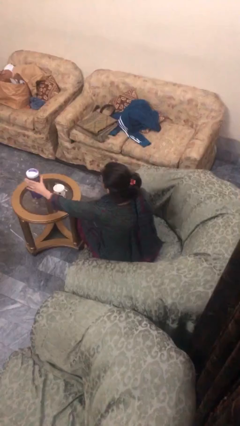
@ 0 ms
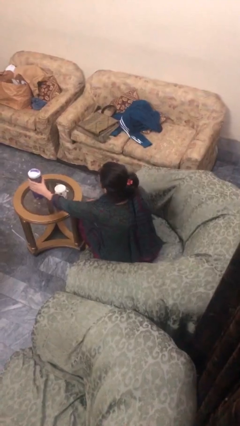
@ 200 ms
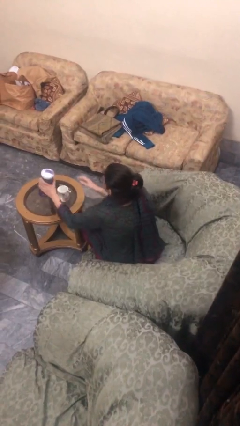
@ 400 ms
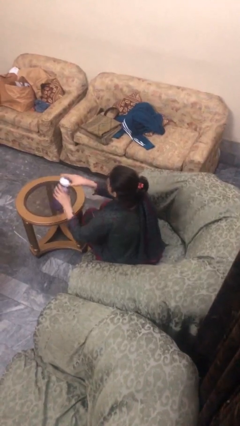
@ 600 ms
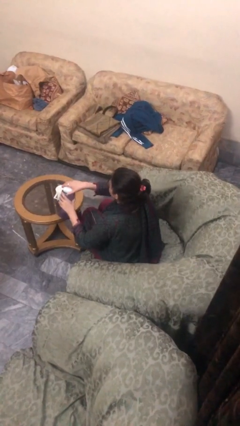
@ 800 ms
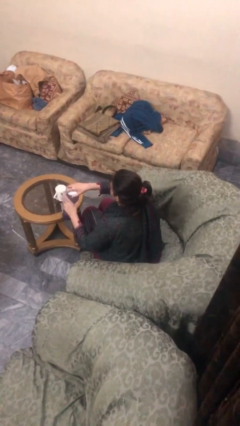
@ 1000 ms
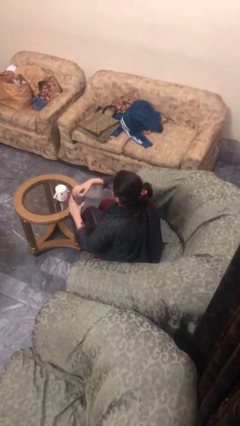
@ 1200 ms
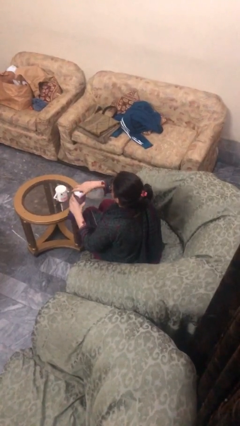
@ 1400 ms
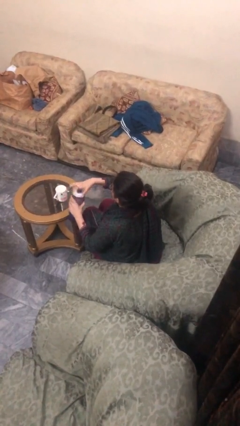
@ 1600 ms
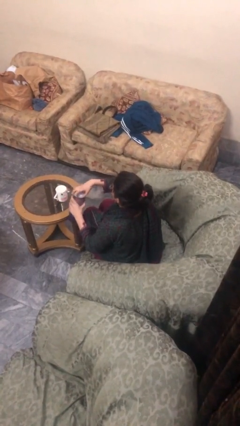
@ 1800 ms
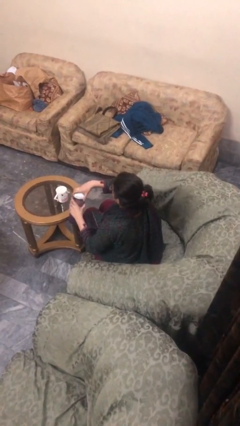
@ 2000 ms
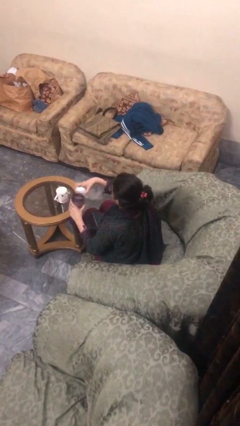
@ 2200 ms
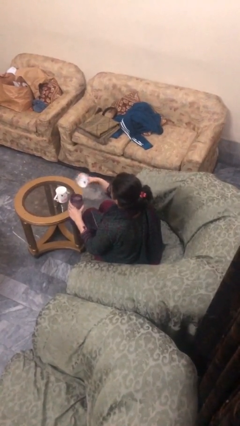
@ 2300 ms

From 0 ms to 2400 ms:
person unscrews lid from bottle

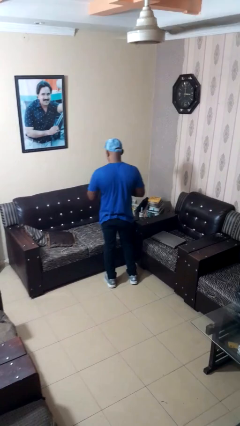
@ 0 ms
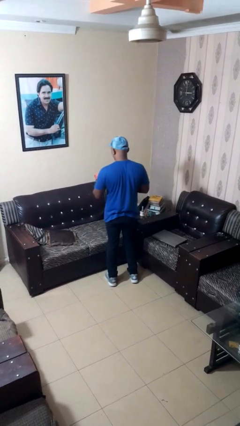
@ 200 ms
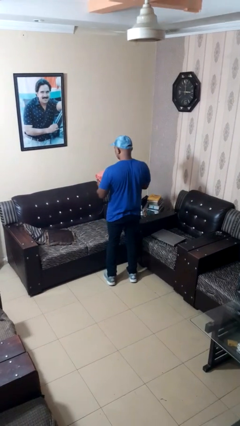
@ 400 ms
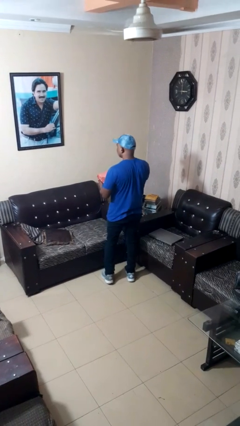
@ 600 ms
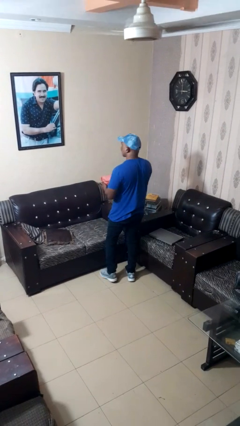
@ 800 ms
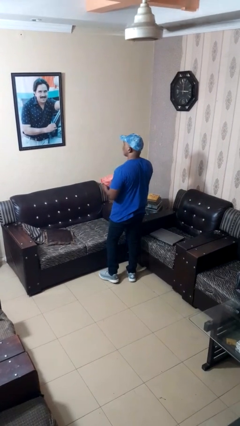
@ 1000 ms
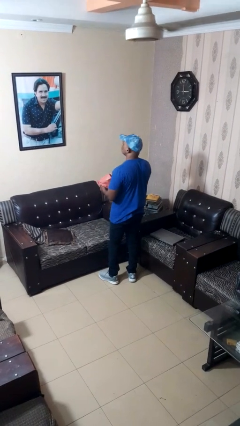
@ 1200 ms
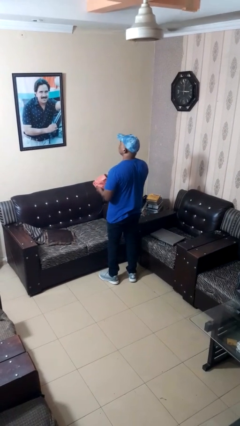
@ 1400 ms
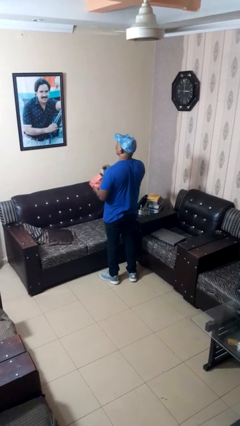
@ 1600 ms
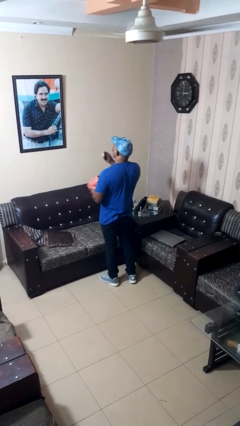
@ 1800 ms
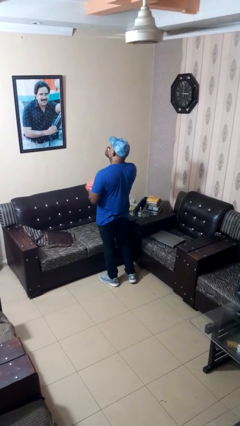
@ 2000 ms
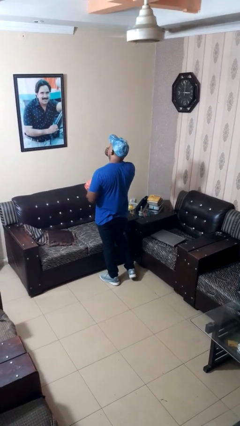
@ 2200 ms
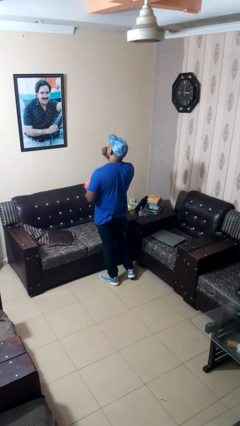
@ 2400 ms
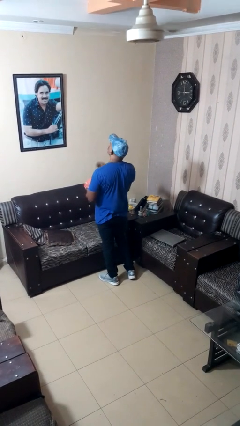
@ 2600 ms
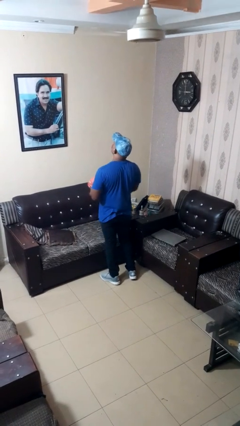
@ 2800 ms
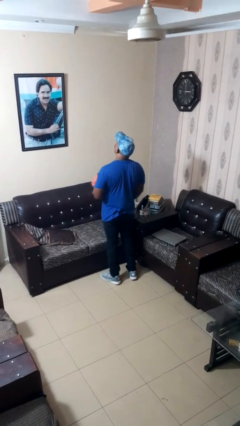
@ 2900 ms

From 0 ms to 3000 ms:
person eats snack from bag

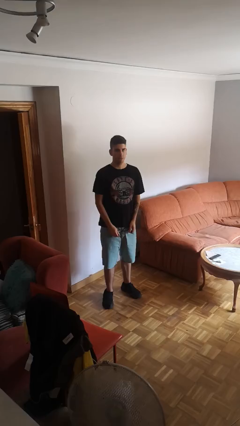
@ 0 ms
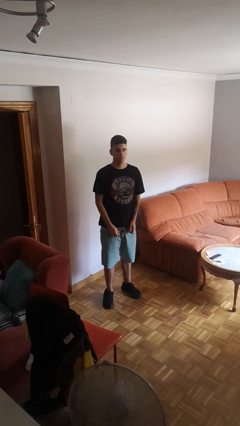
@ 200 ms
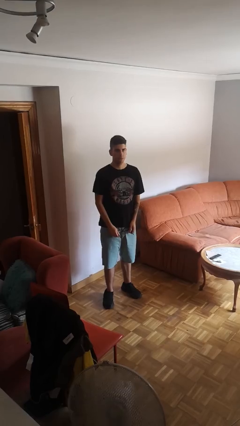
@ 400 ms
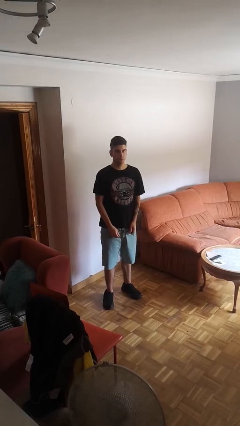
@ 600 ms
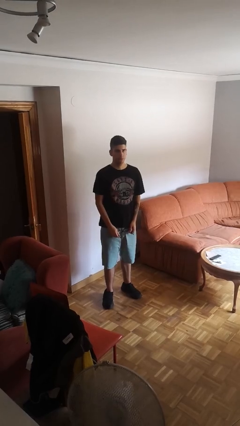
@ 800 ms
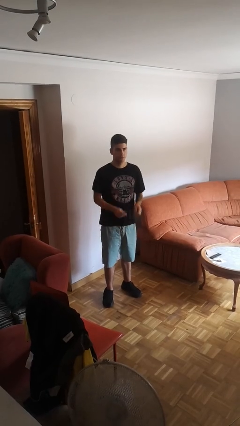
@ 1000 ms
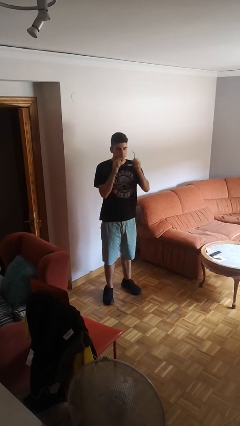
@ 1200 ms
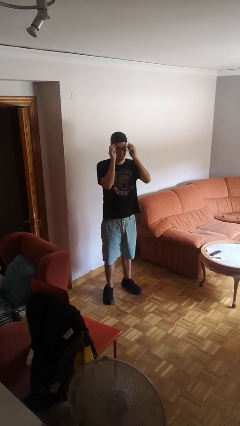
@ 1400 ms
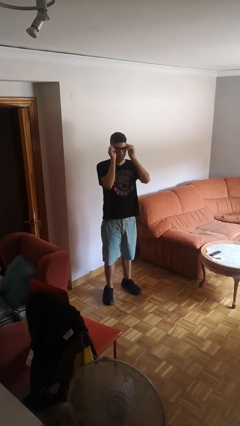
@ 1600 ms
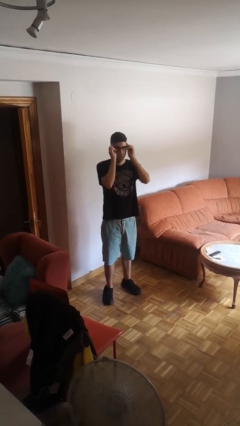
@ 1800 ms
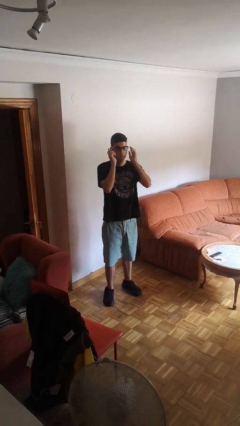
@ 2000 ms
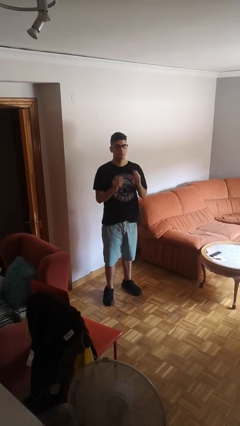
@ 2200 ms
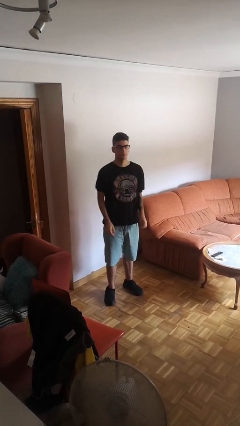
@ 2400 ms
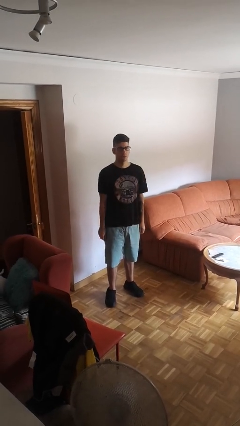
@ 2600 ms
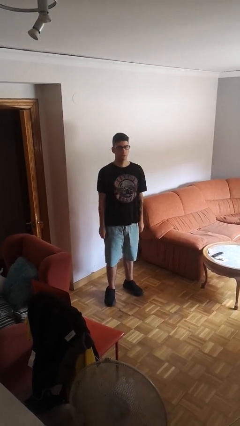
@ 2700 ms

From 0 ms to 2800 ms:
person puts on glasses

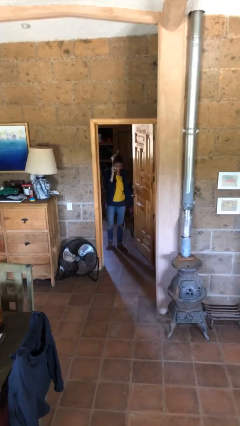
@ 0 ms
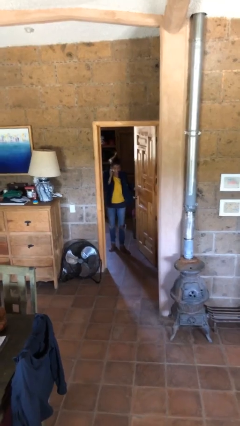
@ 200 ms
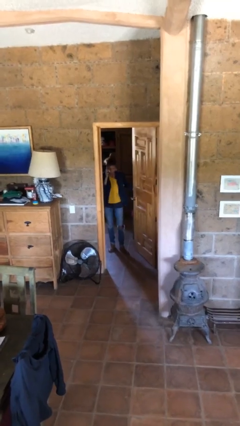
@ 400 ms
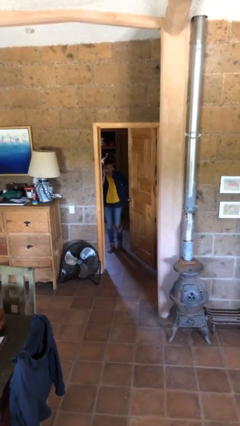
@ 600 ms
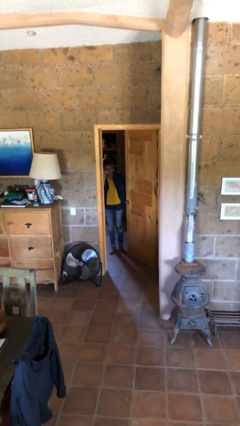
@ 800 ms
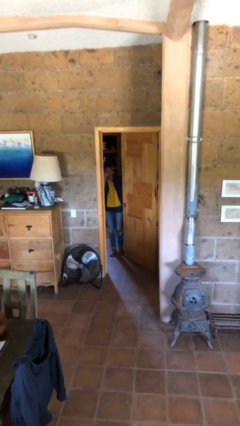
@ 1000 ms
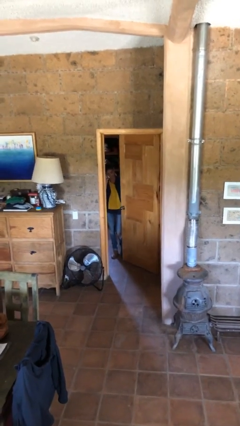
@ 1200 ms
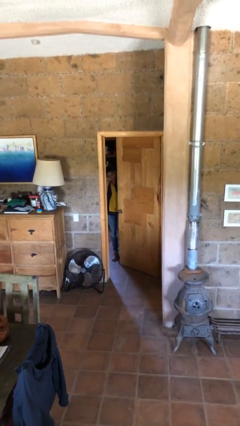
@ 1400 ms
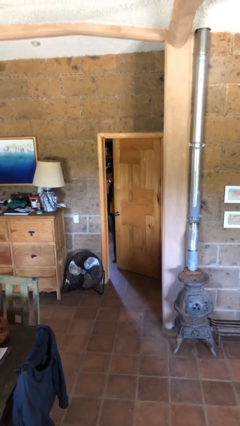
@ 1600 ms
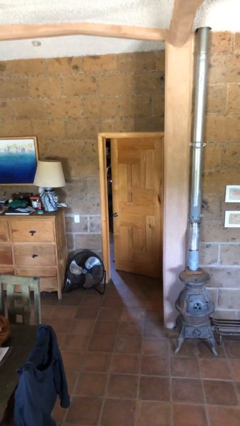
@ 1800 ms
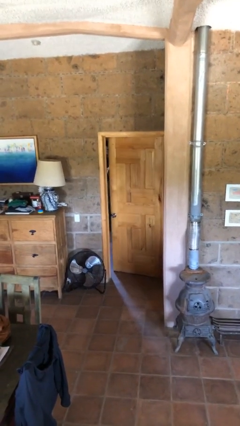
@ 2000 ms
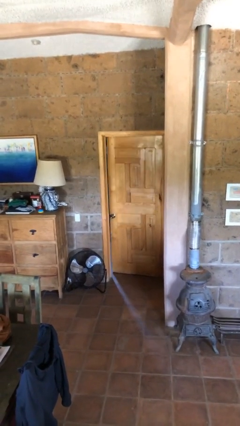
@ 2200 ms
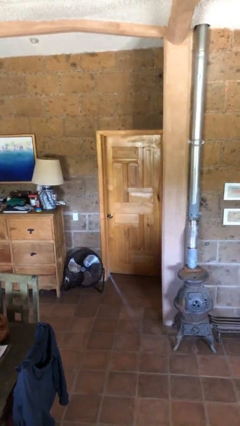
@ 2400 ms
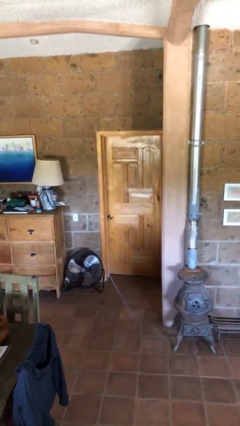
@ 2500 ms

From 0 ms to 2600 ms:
person closes facility door

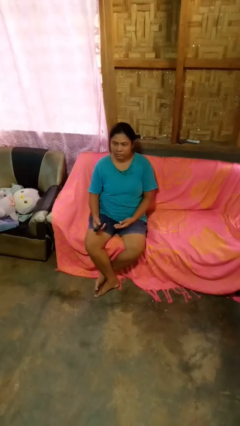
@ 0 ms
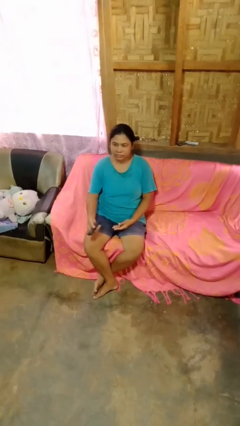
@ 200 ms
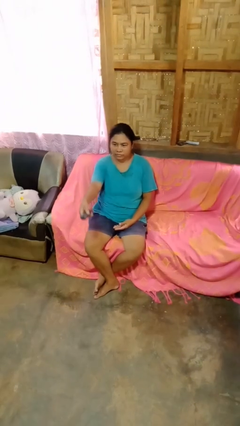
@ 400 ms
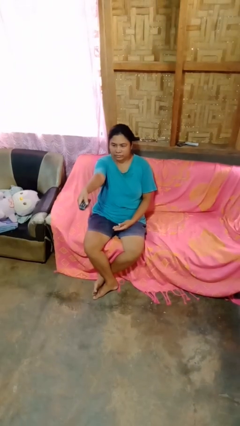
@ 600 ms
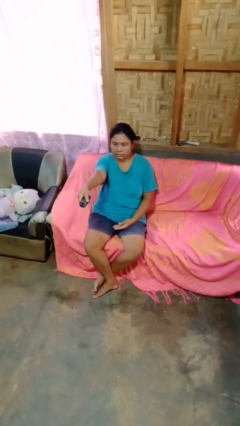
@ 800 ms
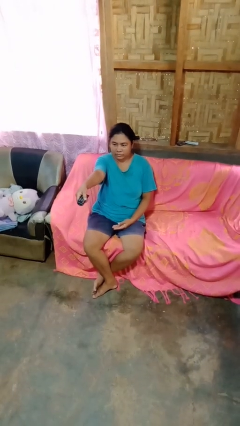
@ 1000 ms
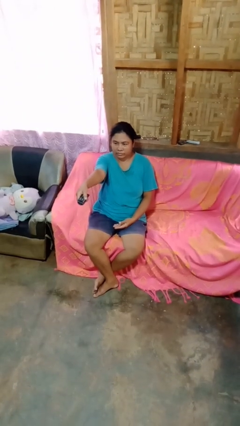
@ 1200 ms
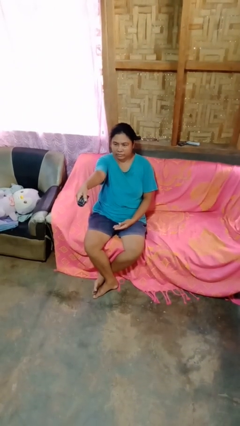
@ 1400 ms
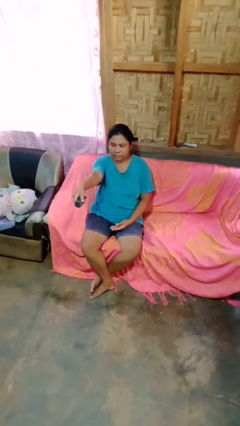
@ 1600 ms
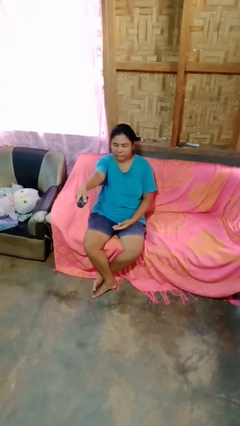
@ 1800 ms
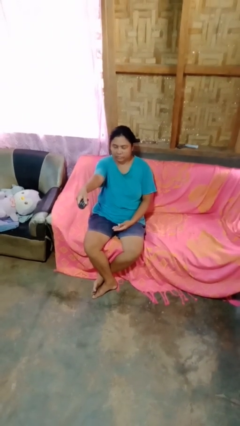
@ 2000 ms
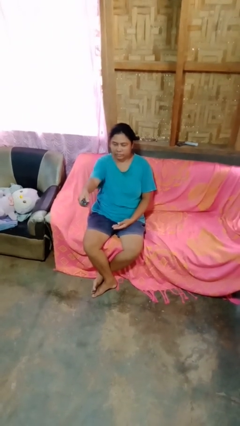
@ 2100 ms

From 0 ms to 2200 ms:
person uses television remote

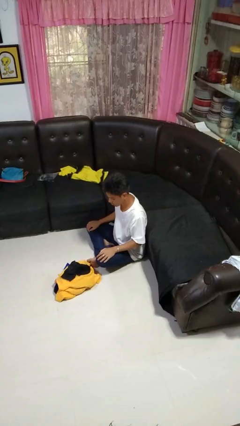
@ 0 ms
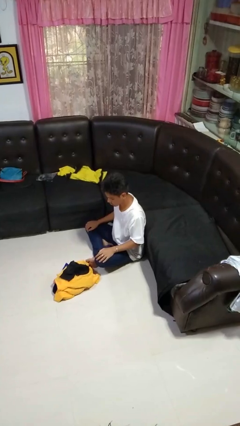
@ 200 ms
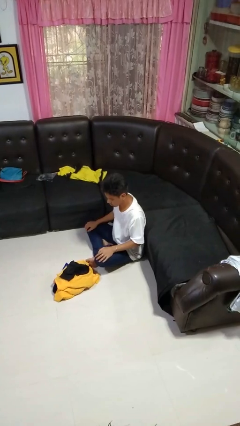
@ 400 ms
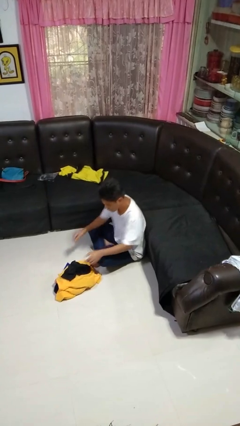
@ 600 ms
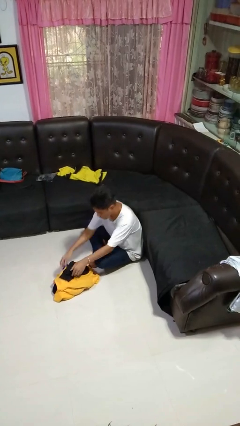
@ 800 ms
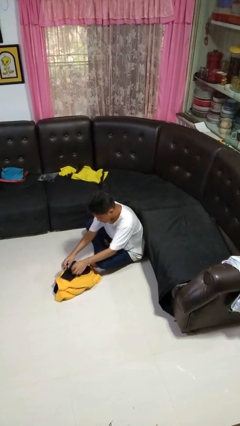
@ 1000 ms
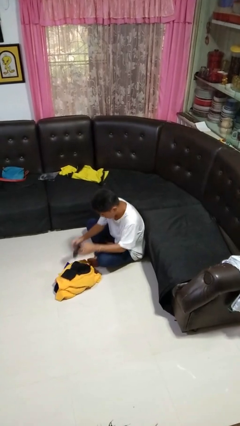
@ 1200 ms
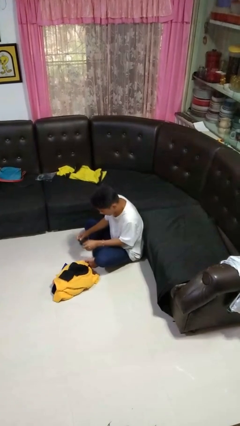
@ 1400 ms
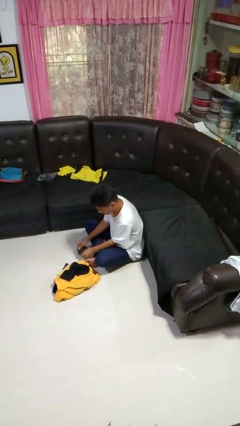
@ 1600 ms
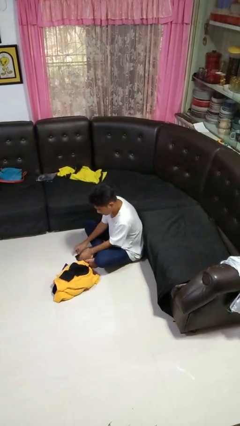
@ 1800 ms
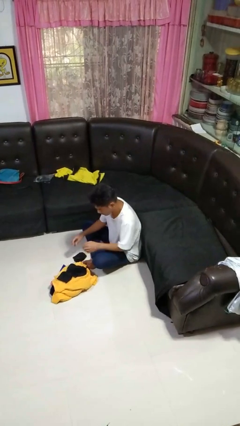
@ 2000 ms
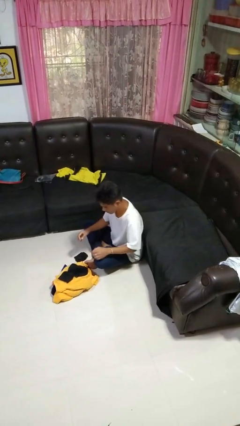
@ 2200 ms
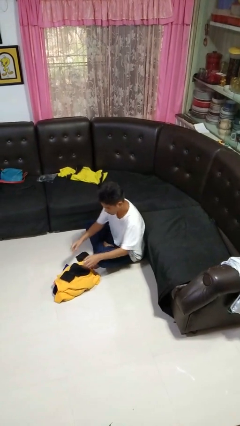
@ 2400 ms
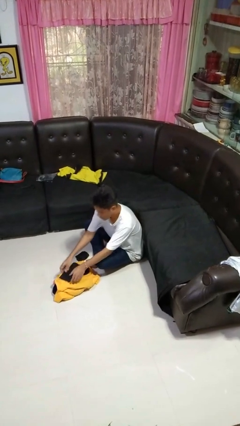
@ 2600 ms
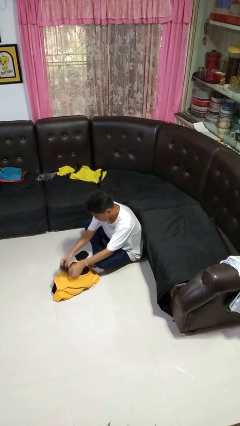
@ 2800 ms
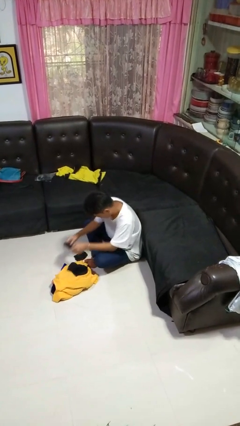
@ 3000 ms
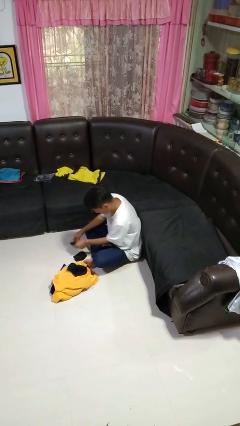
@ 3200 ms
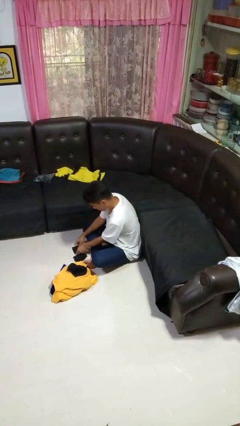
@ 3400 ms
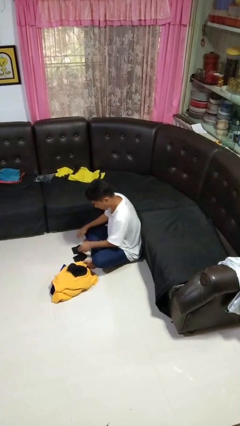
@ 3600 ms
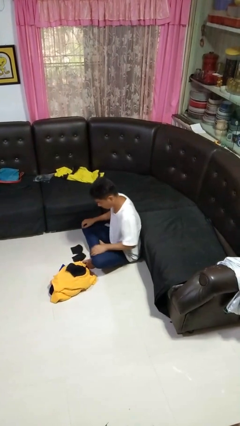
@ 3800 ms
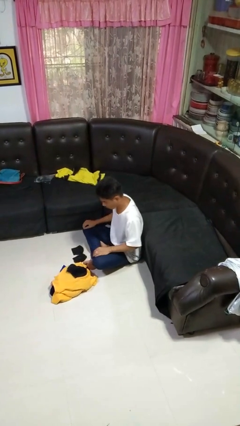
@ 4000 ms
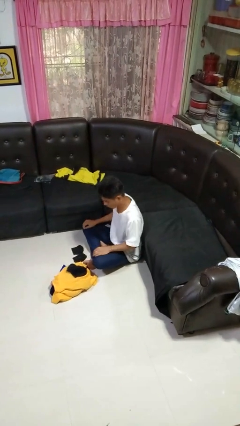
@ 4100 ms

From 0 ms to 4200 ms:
person folds socks
